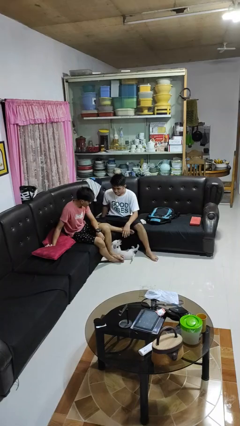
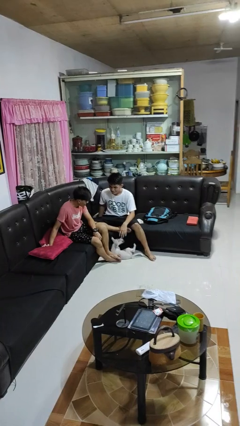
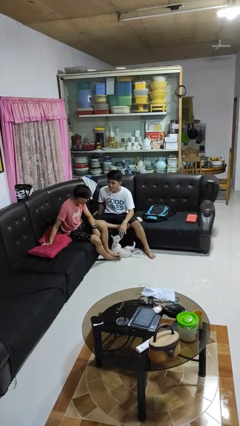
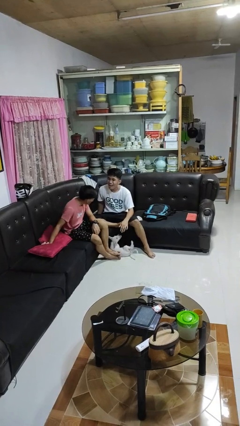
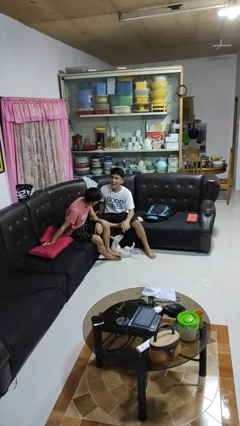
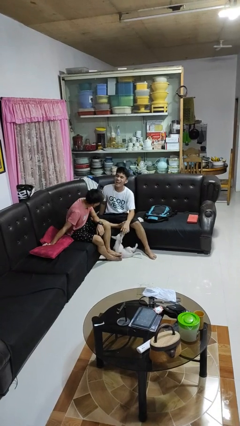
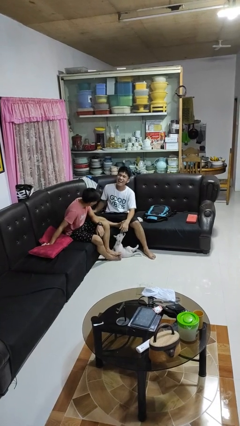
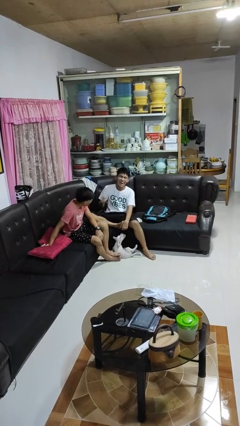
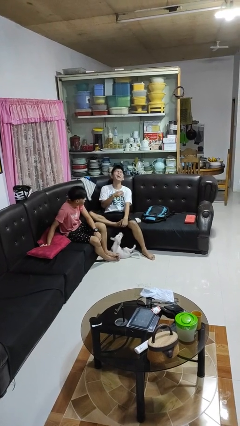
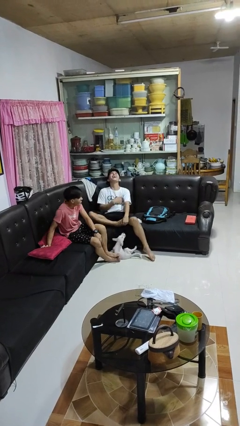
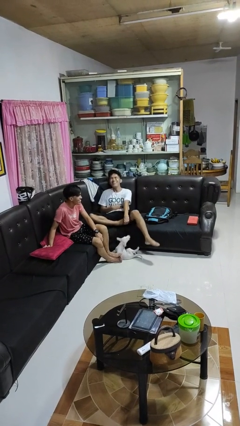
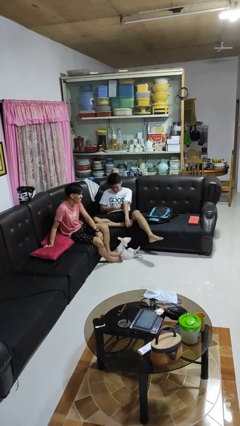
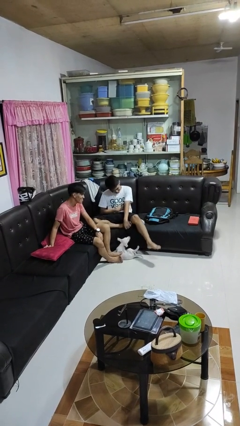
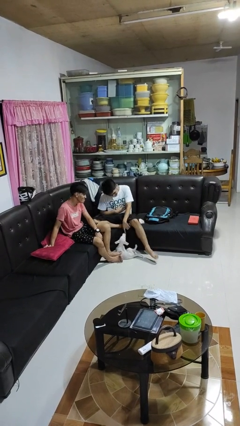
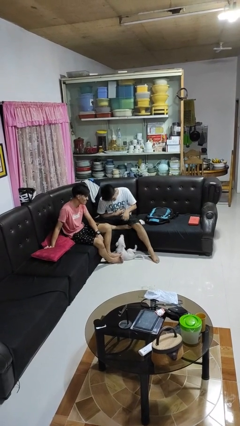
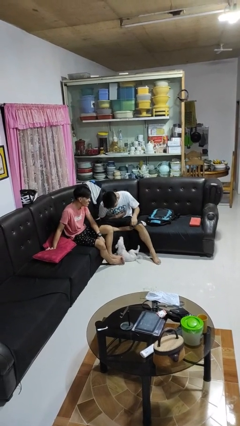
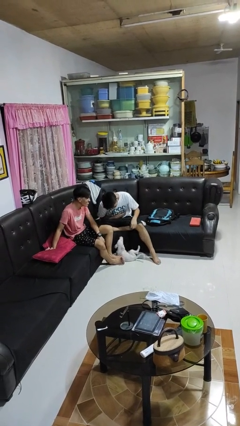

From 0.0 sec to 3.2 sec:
person laughs with person

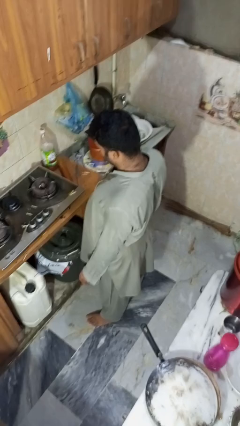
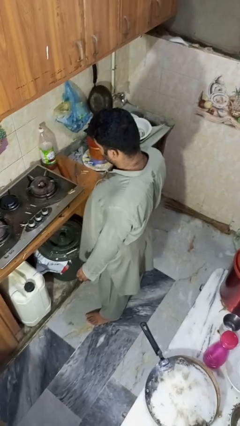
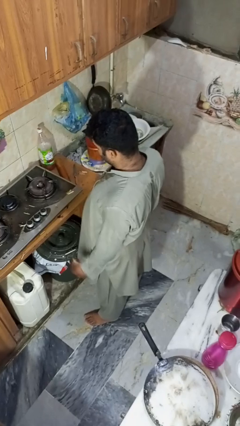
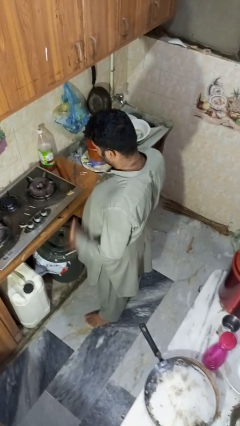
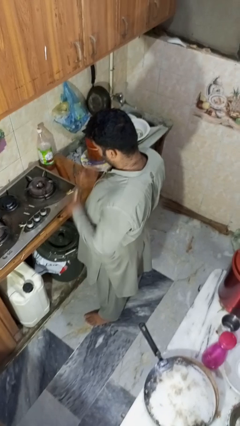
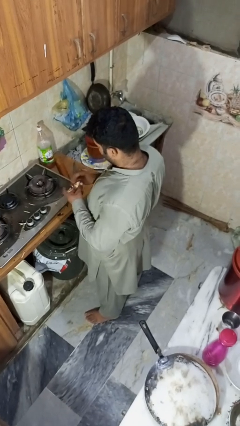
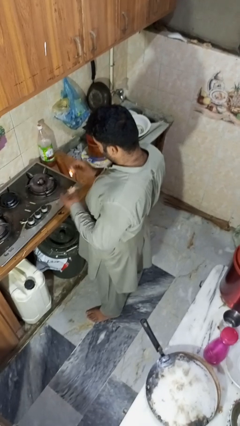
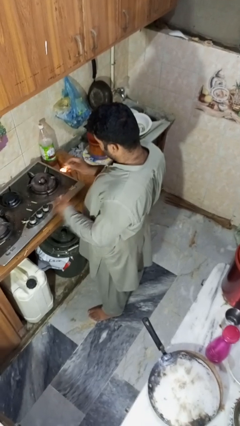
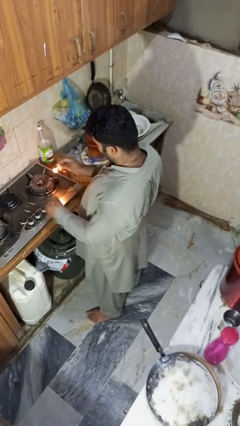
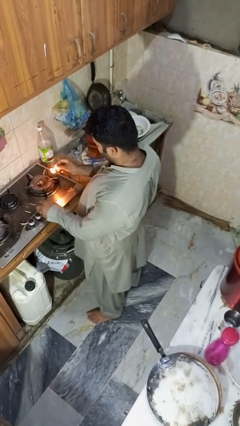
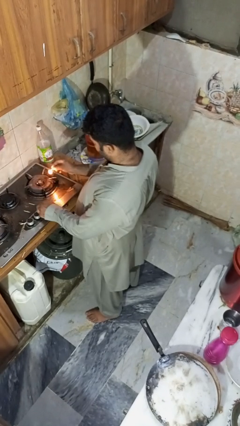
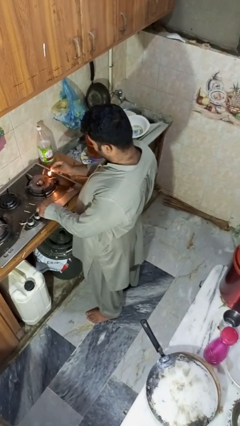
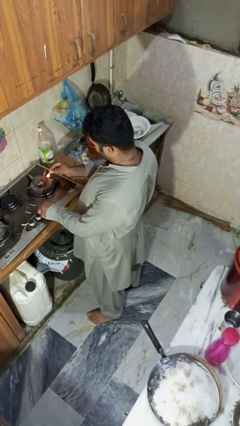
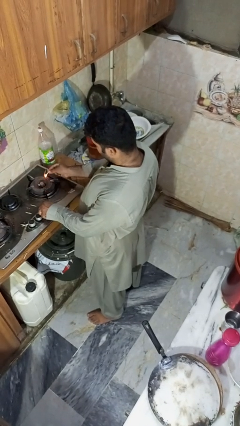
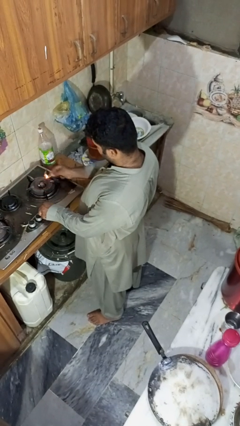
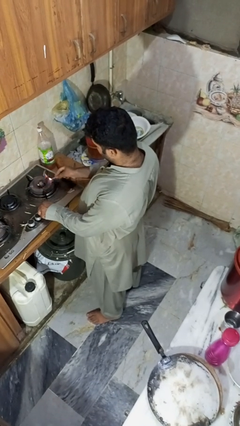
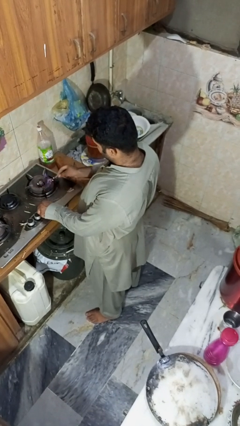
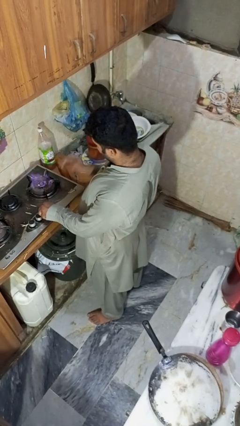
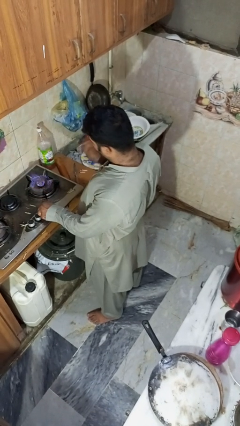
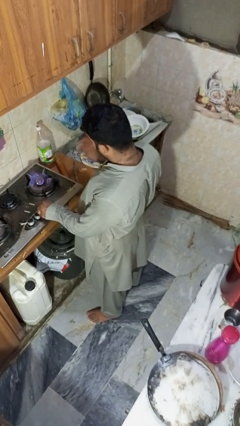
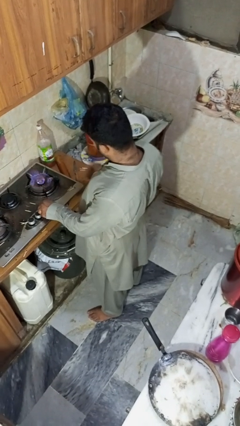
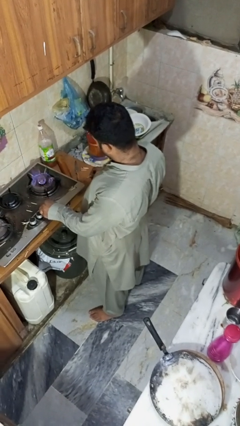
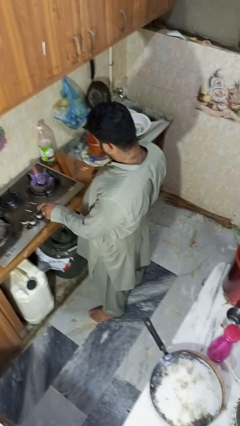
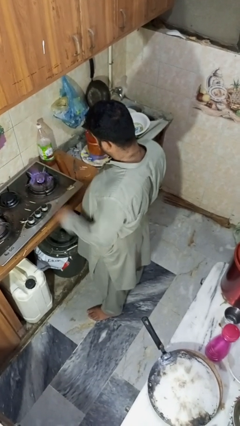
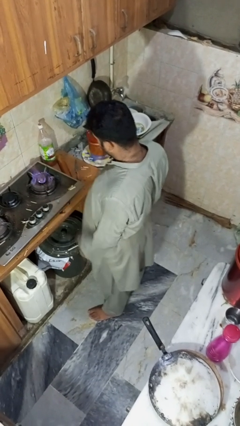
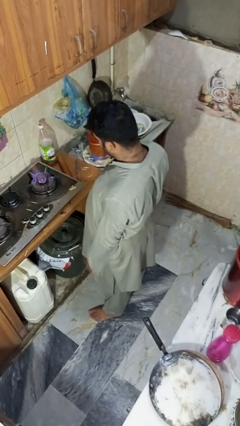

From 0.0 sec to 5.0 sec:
person turns on stovetop

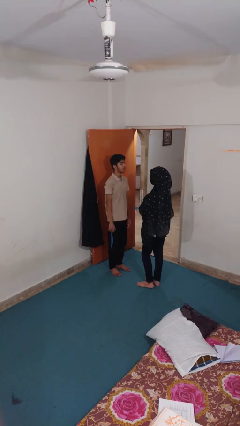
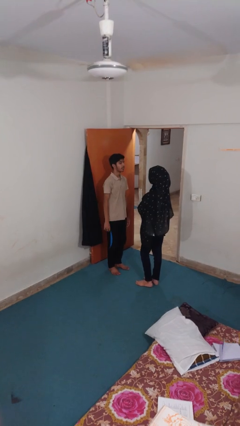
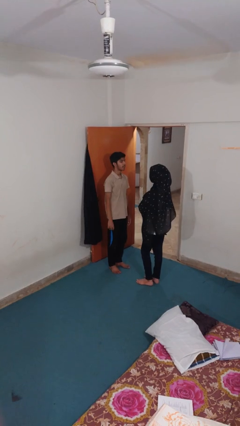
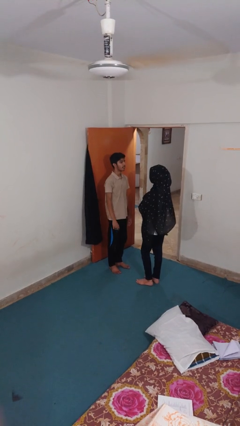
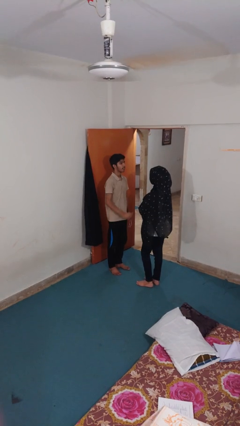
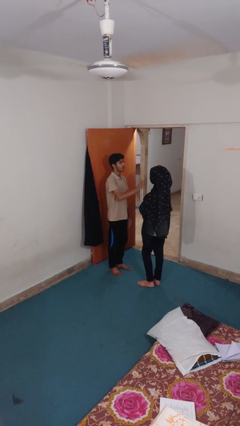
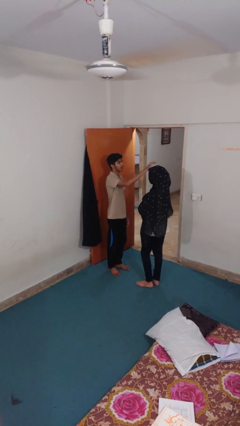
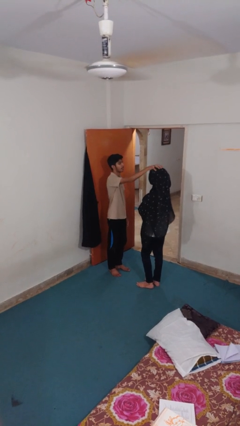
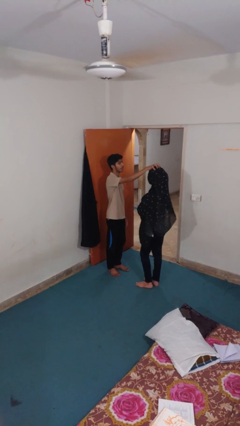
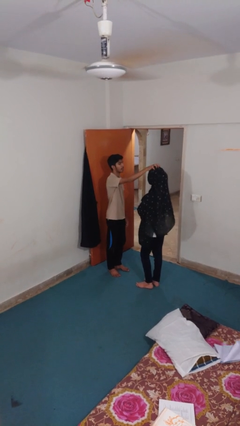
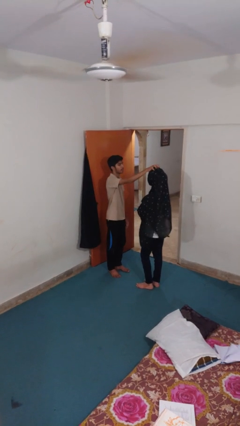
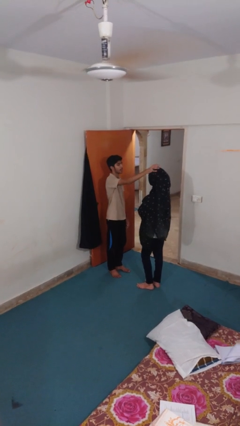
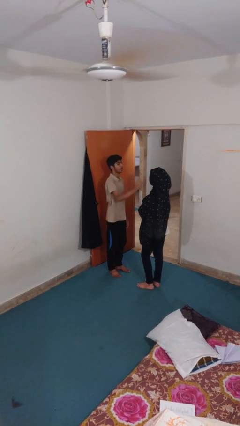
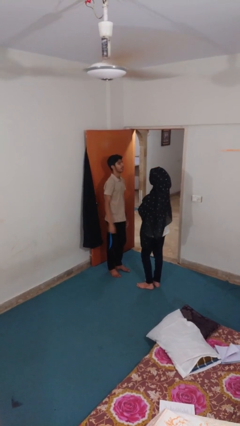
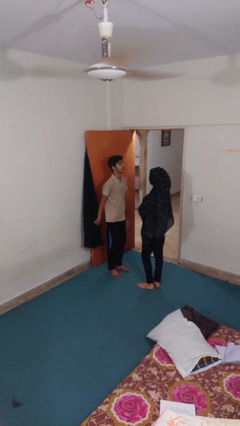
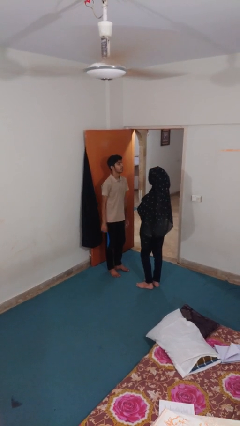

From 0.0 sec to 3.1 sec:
person grabs person by hair

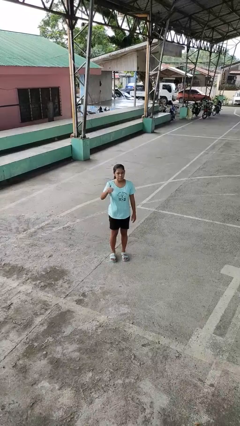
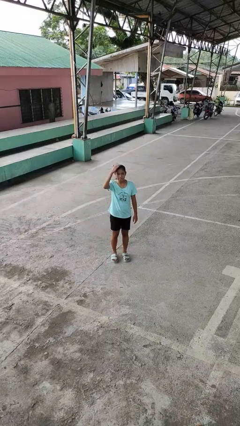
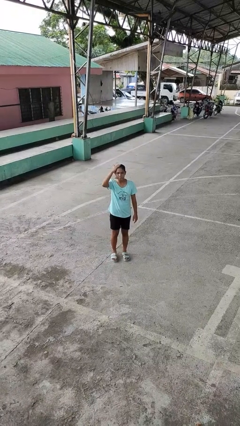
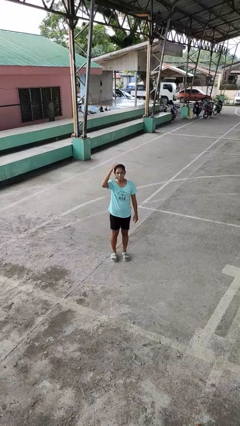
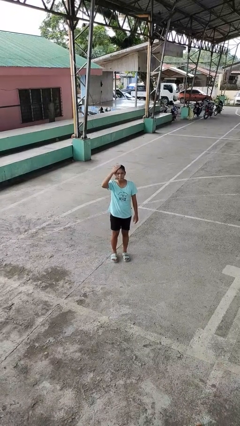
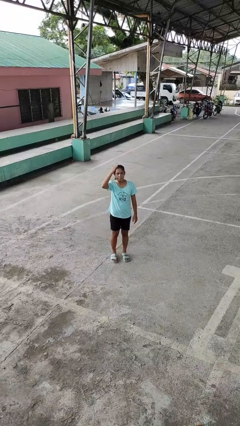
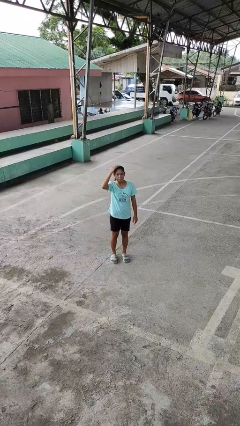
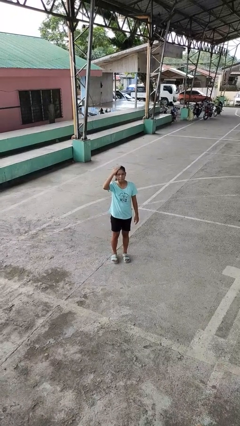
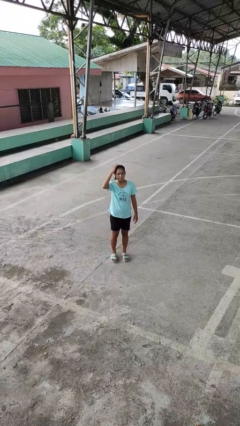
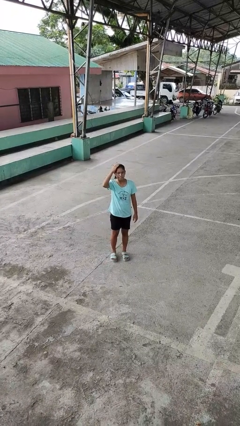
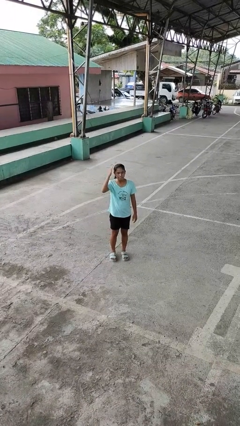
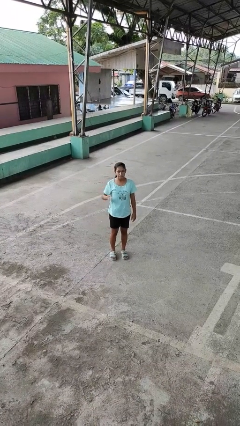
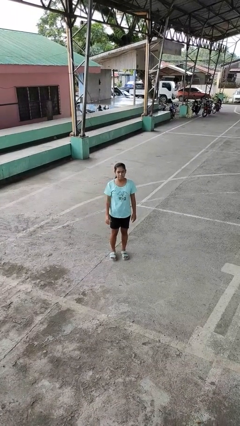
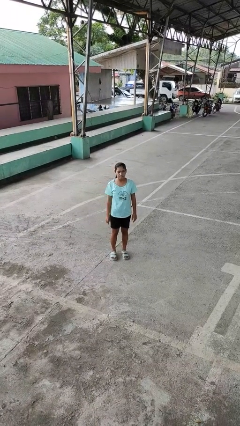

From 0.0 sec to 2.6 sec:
person pats head

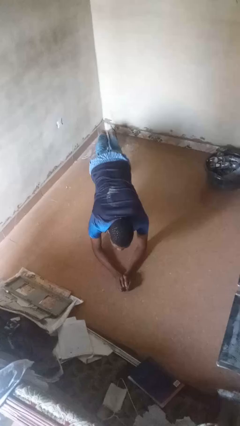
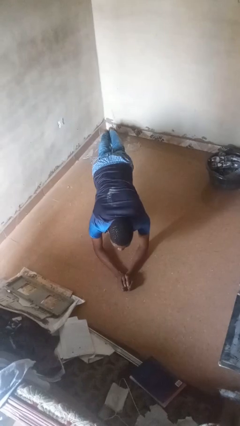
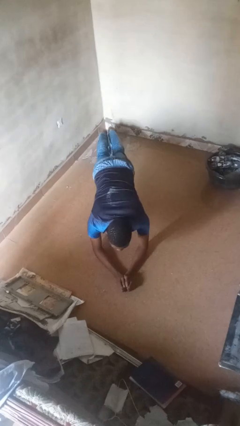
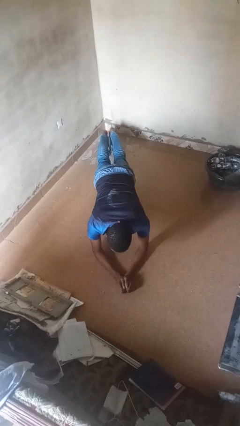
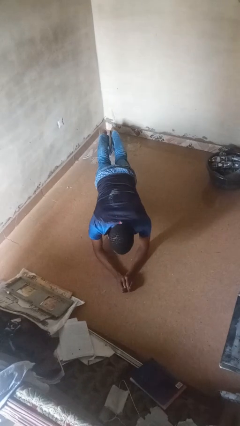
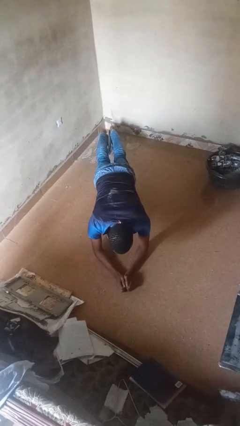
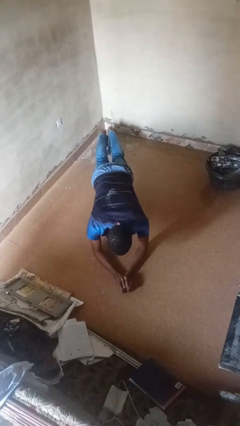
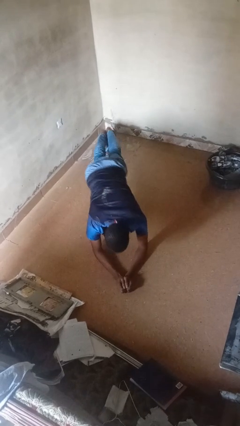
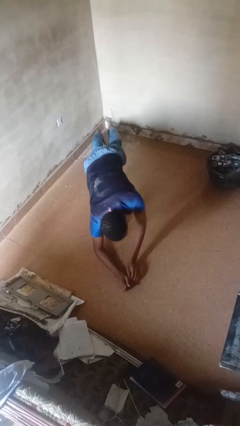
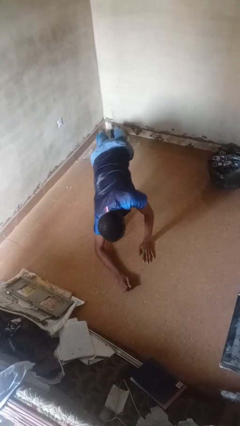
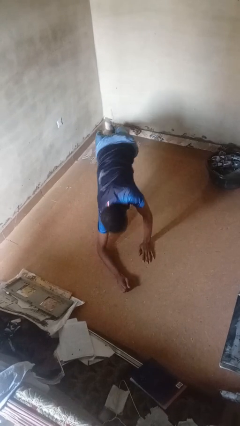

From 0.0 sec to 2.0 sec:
person exercises with plank

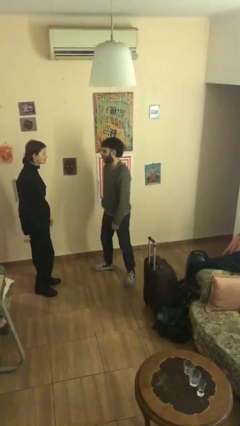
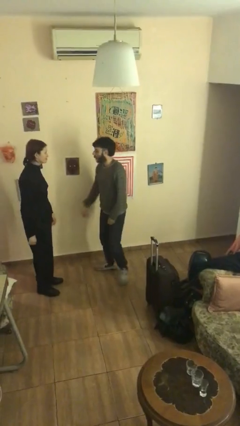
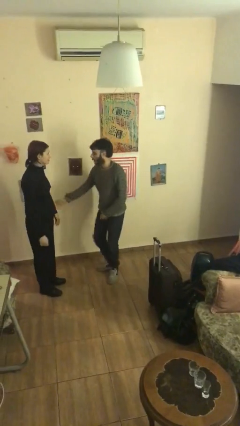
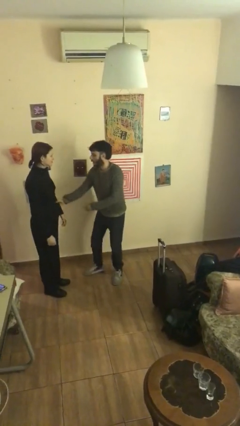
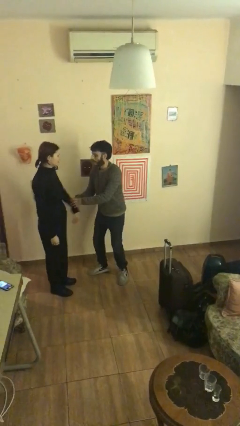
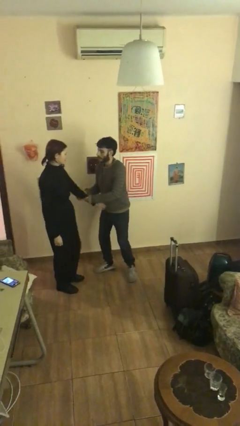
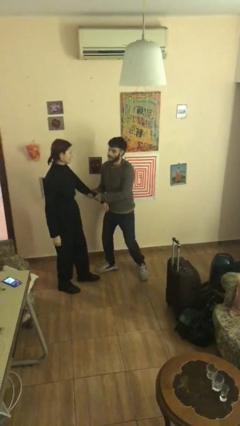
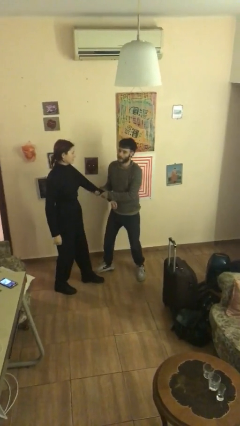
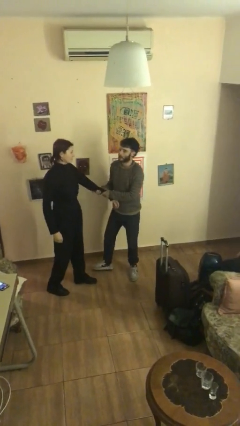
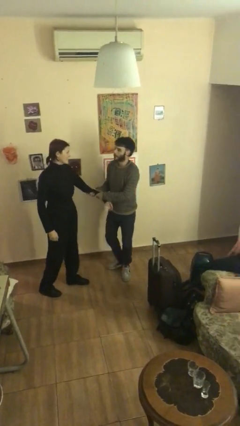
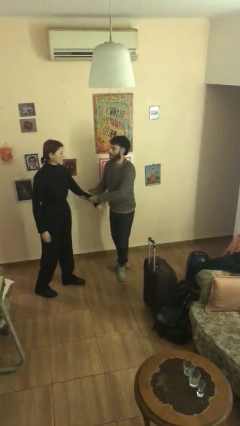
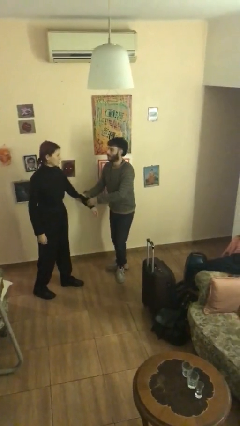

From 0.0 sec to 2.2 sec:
person grabs person by forearm
